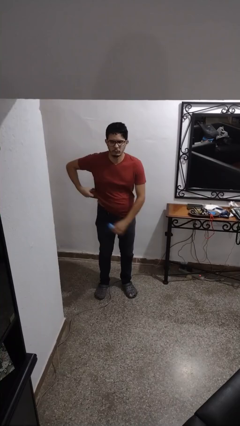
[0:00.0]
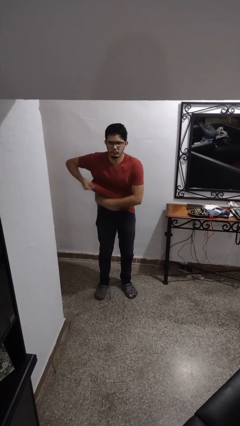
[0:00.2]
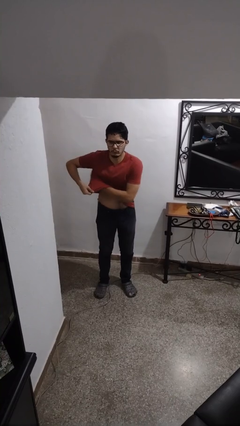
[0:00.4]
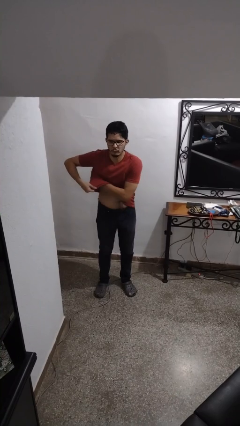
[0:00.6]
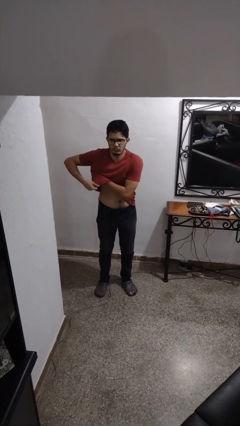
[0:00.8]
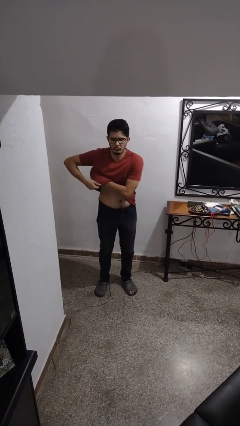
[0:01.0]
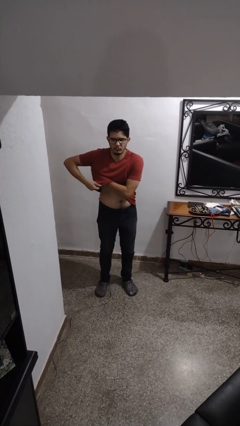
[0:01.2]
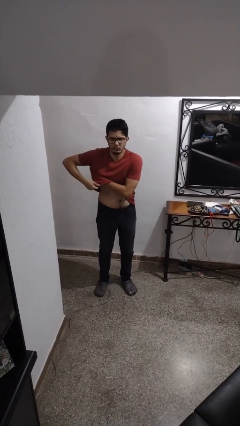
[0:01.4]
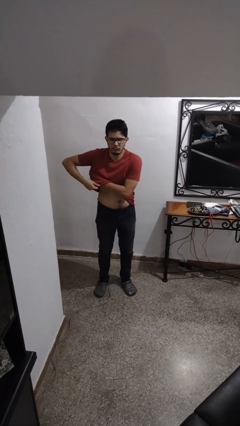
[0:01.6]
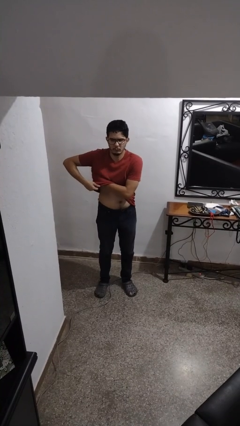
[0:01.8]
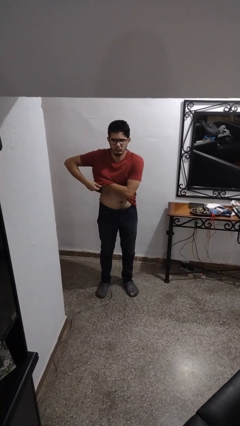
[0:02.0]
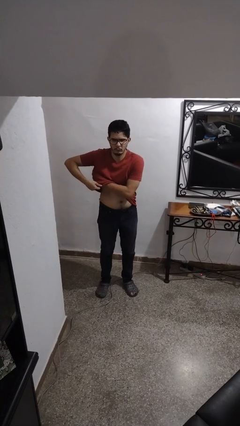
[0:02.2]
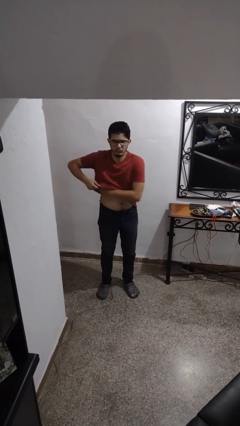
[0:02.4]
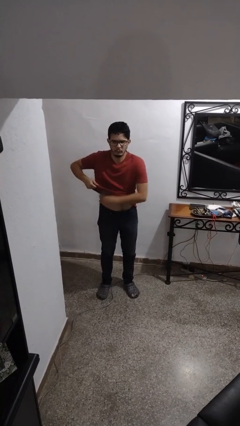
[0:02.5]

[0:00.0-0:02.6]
person applies deodorant

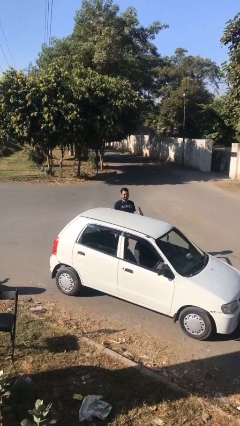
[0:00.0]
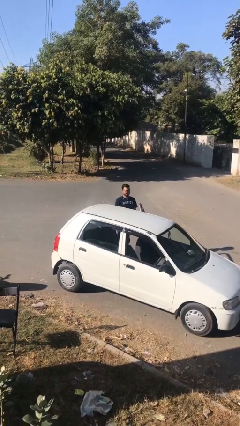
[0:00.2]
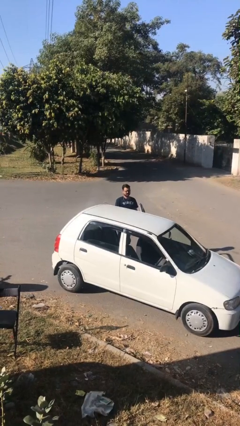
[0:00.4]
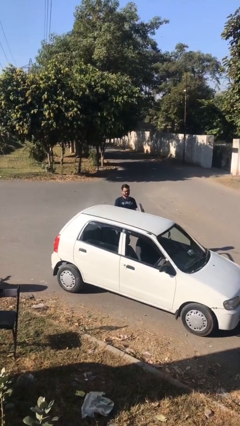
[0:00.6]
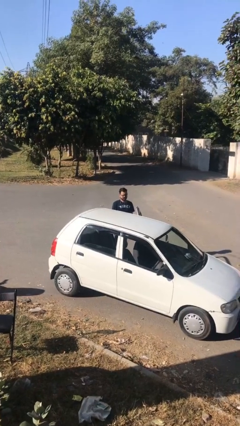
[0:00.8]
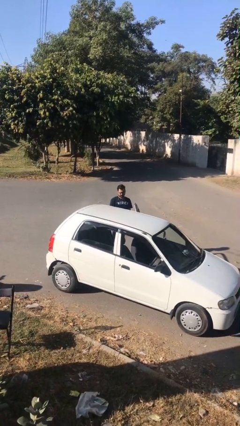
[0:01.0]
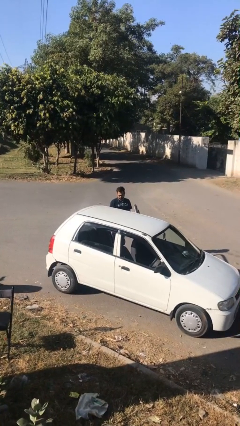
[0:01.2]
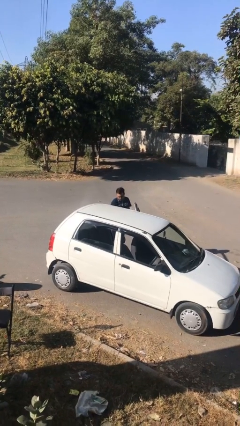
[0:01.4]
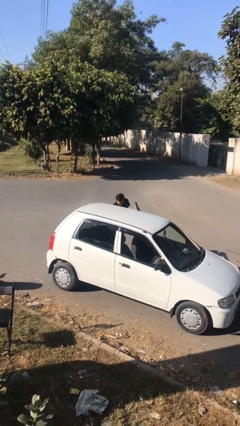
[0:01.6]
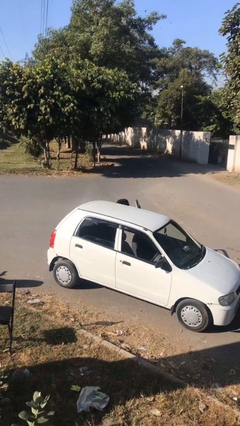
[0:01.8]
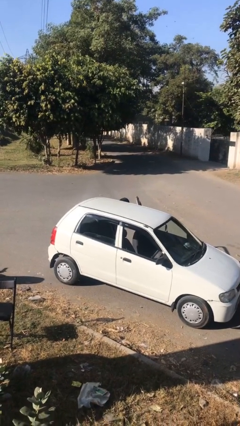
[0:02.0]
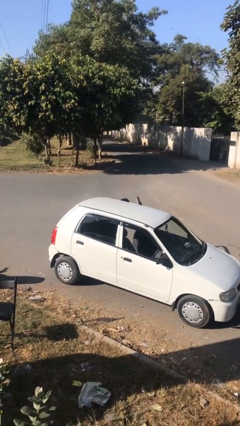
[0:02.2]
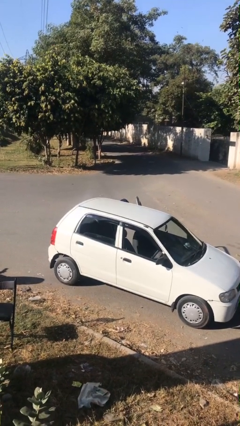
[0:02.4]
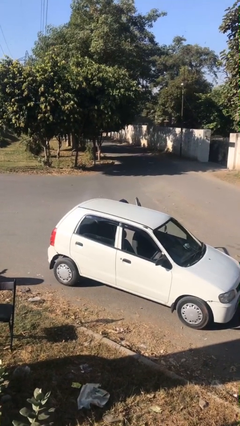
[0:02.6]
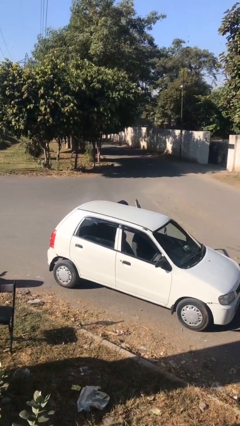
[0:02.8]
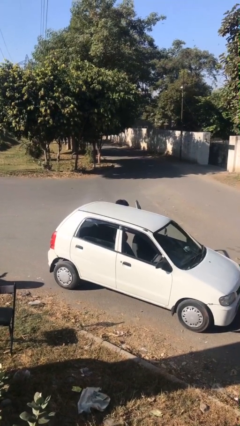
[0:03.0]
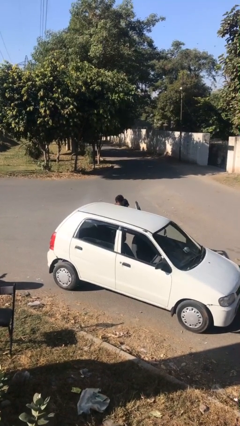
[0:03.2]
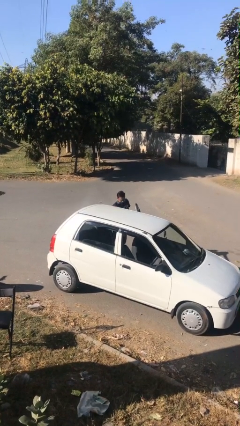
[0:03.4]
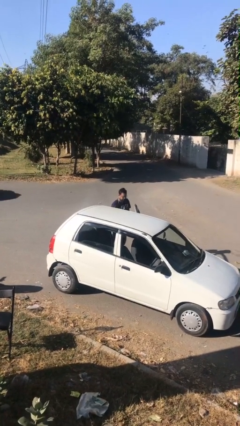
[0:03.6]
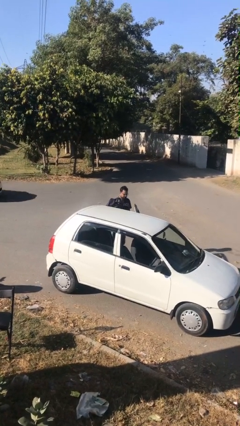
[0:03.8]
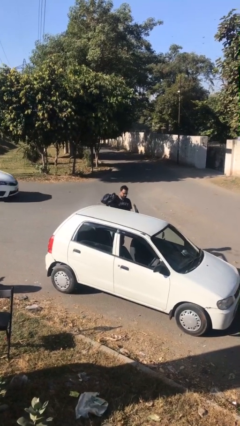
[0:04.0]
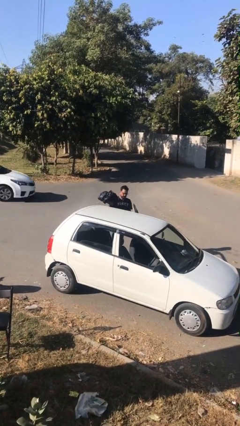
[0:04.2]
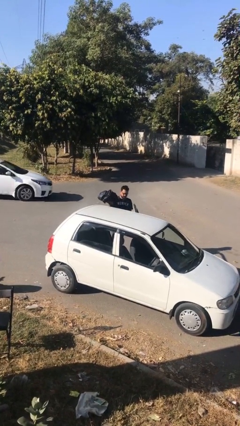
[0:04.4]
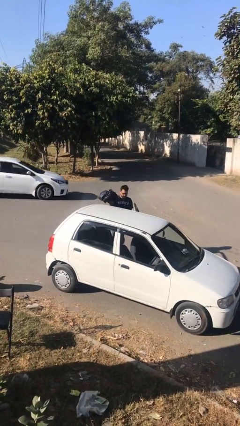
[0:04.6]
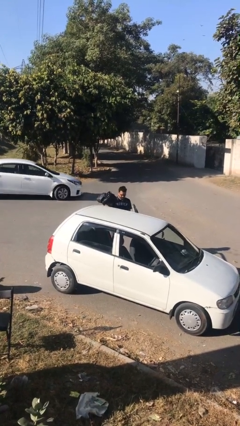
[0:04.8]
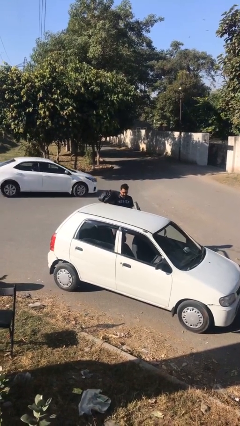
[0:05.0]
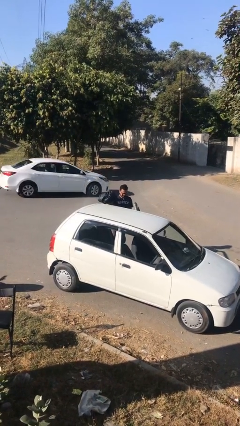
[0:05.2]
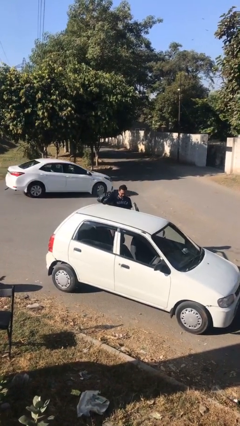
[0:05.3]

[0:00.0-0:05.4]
person unloads car

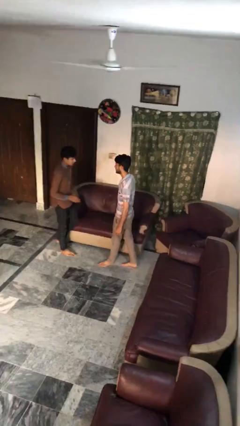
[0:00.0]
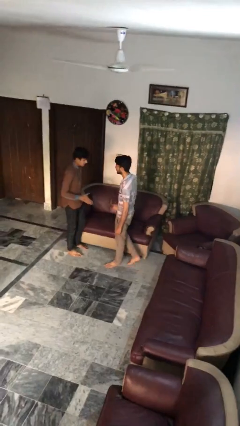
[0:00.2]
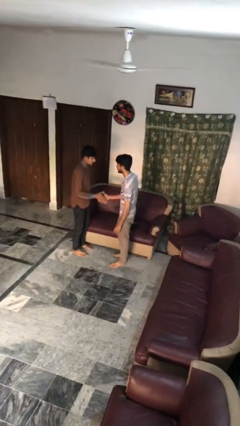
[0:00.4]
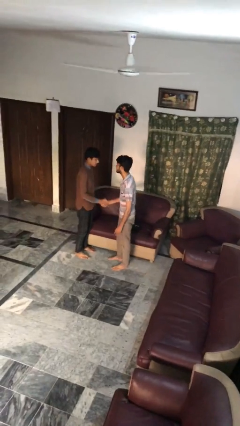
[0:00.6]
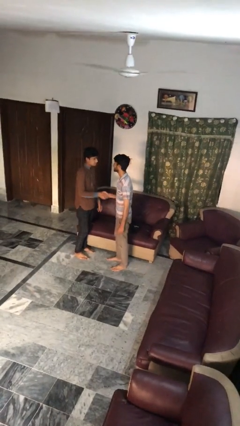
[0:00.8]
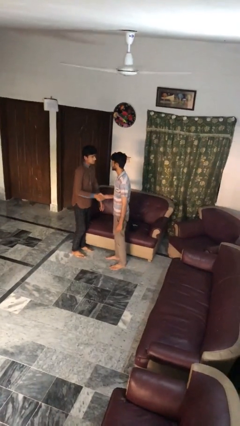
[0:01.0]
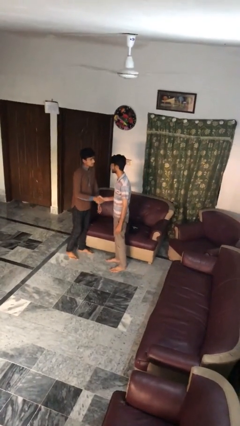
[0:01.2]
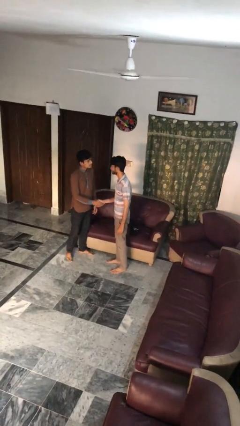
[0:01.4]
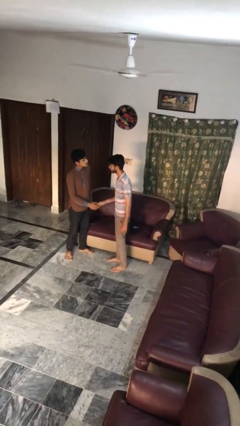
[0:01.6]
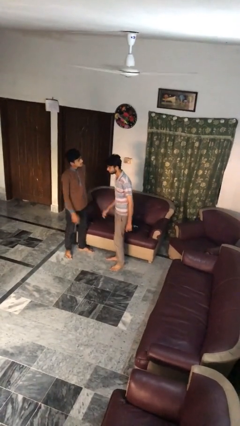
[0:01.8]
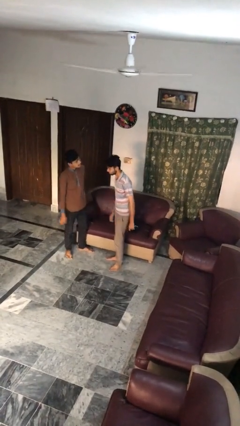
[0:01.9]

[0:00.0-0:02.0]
person shakes hand

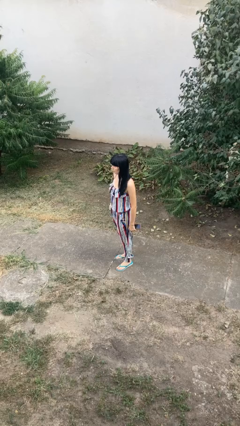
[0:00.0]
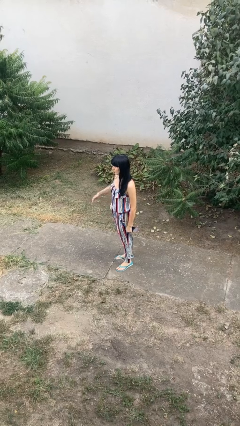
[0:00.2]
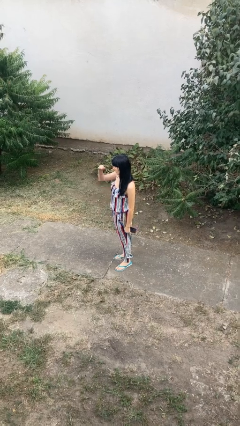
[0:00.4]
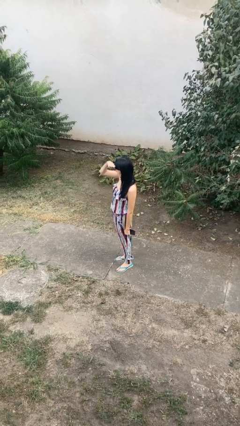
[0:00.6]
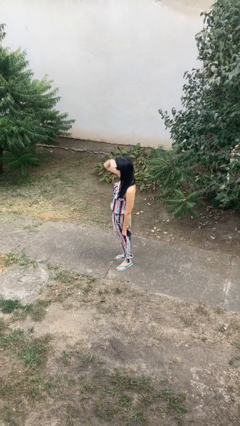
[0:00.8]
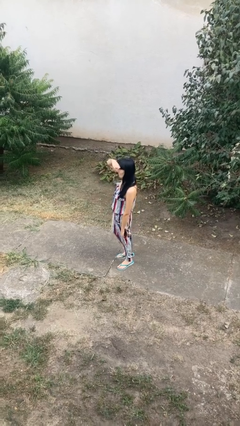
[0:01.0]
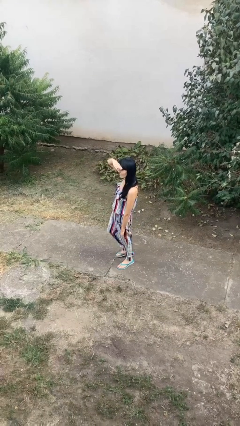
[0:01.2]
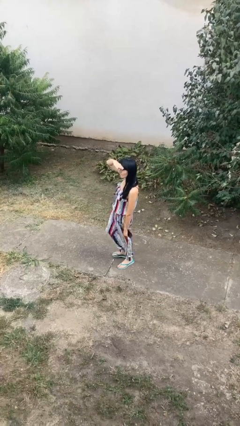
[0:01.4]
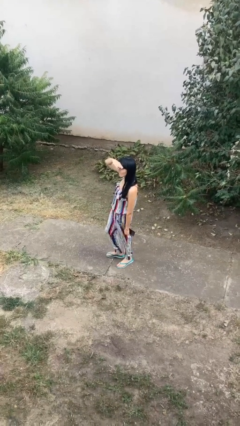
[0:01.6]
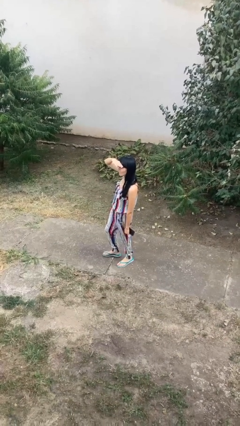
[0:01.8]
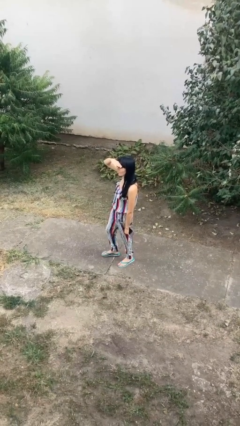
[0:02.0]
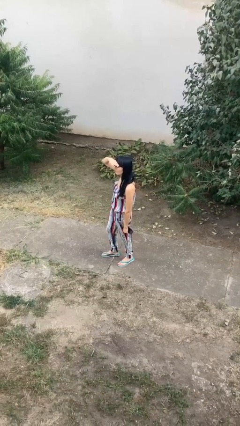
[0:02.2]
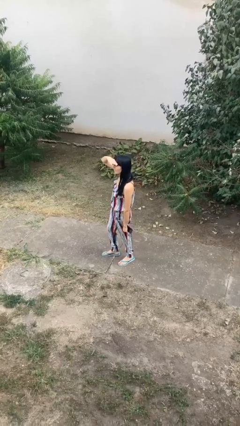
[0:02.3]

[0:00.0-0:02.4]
person shades eyes

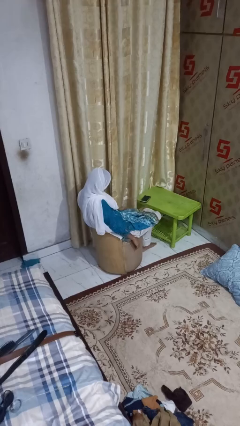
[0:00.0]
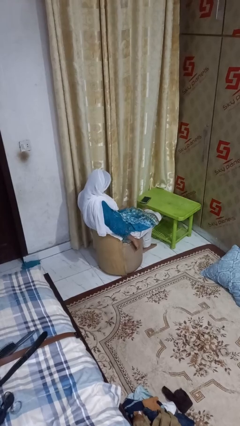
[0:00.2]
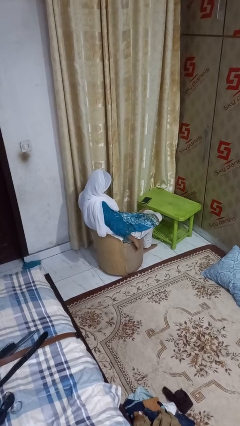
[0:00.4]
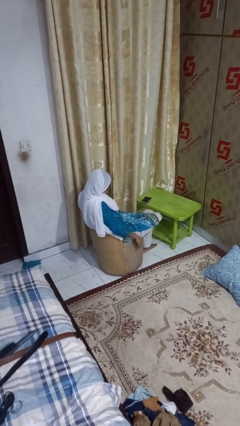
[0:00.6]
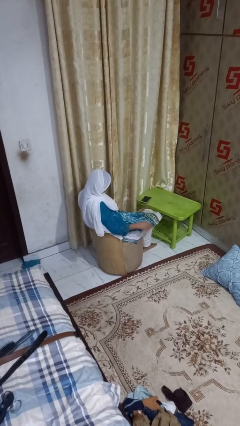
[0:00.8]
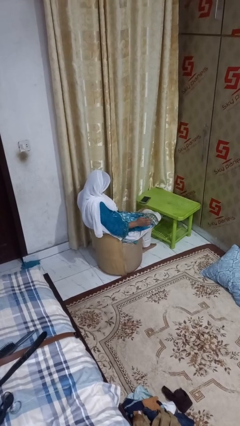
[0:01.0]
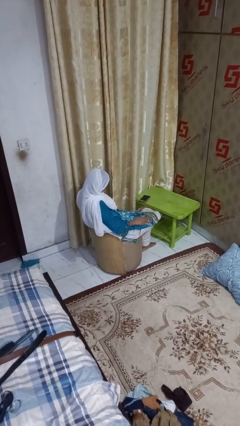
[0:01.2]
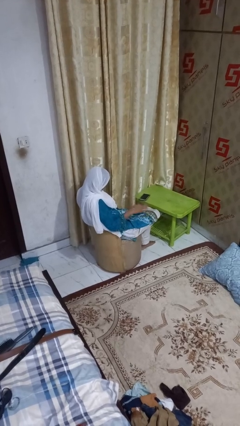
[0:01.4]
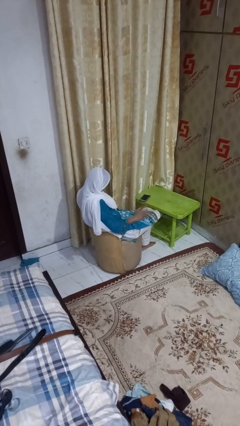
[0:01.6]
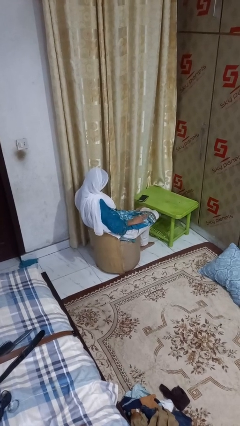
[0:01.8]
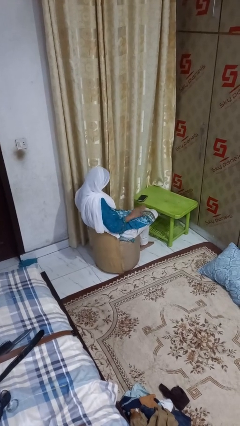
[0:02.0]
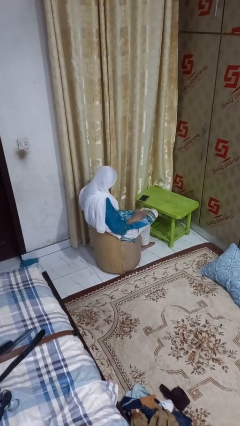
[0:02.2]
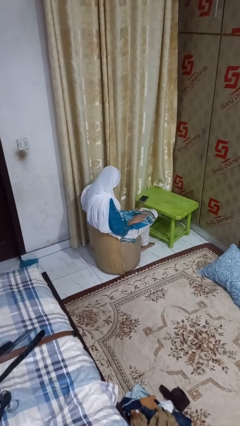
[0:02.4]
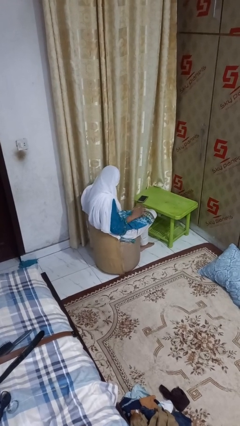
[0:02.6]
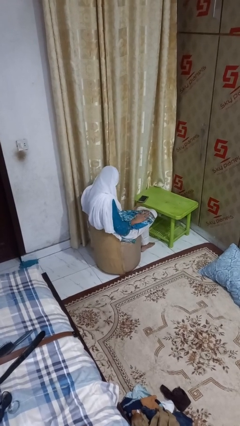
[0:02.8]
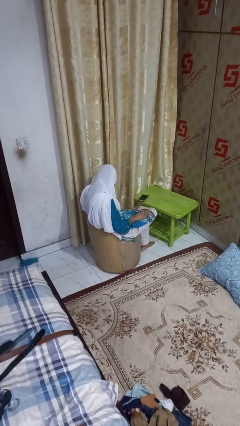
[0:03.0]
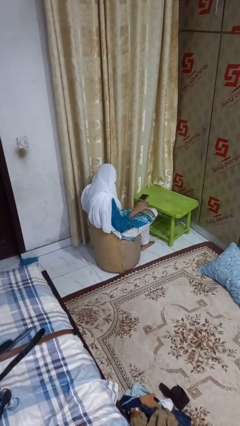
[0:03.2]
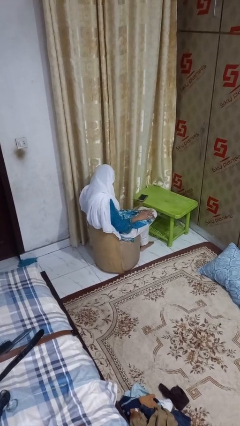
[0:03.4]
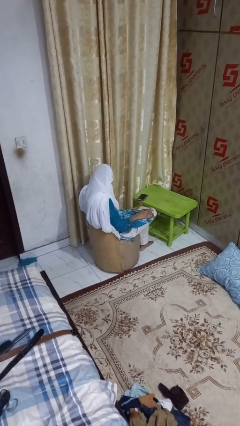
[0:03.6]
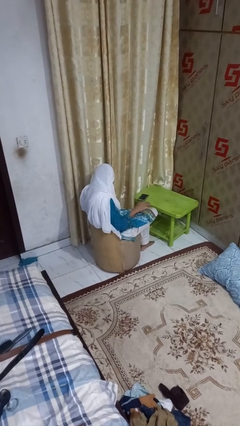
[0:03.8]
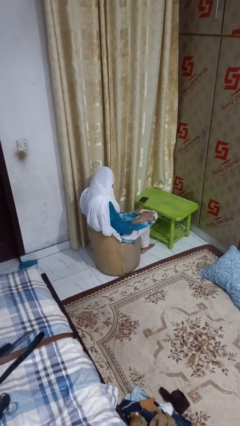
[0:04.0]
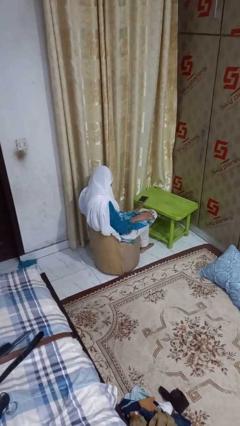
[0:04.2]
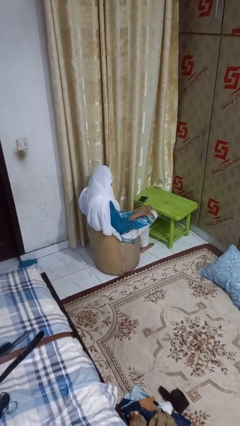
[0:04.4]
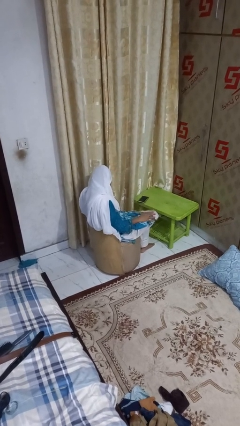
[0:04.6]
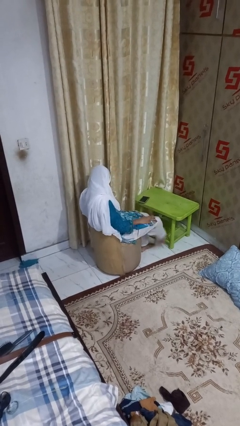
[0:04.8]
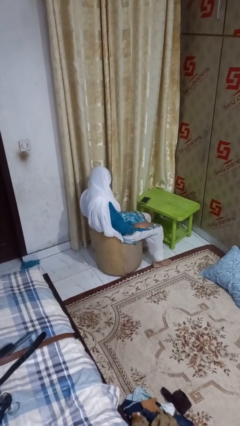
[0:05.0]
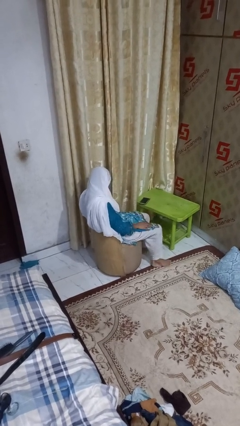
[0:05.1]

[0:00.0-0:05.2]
person slaps hands on thighs
